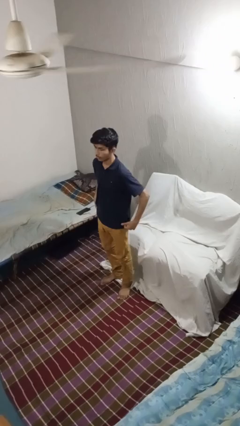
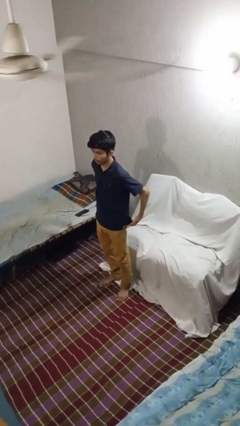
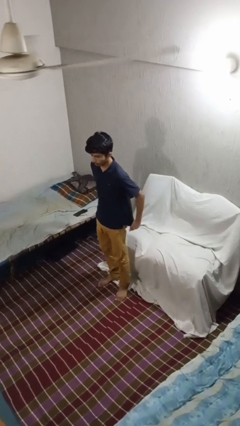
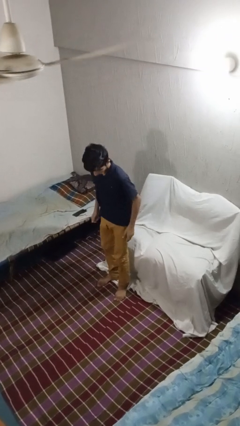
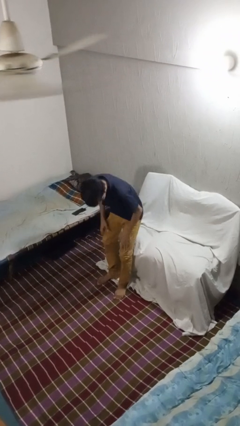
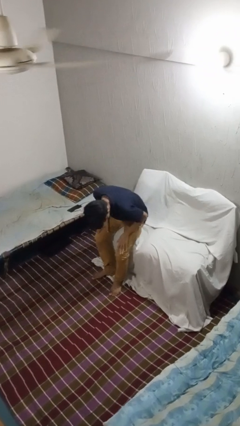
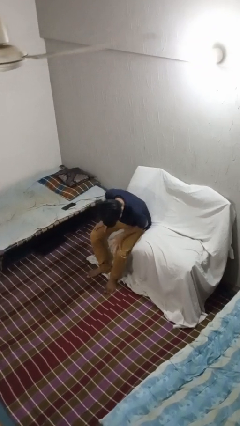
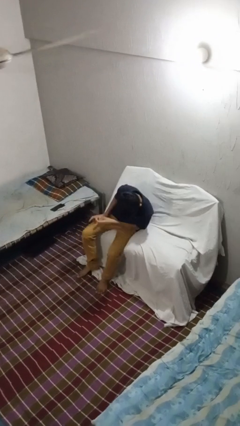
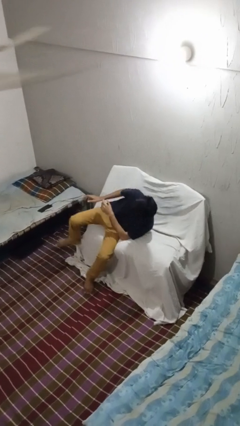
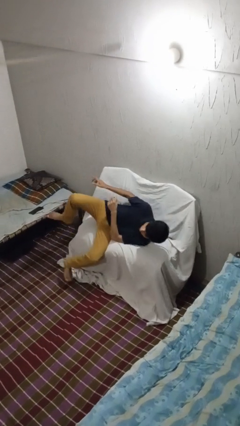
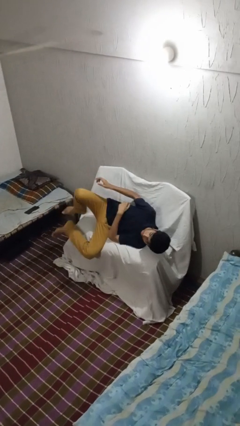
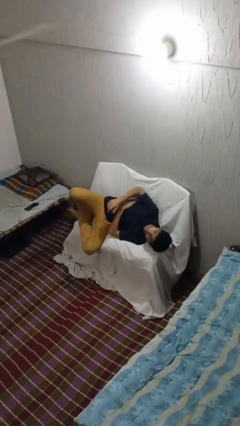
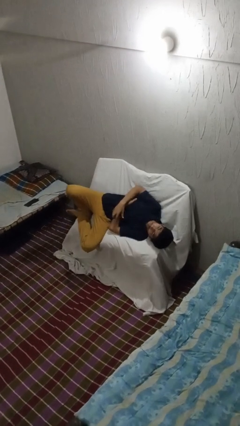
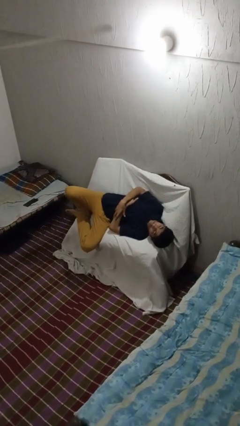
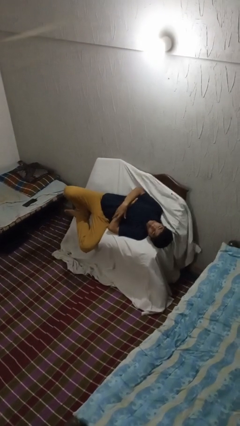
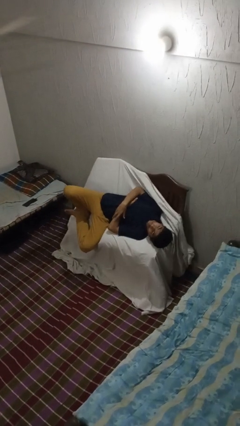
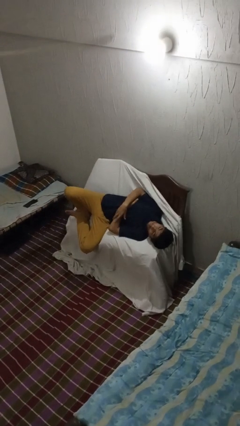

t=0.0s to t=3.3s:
person lies down on couch

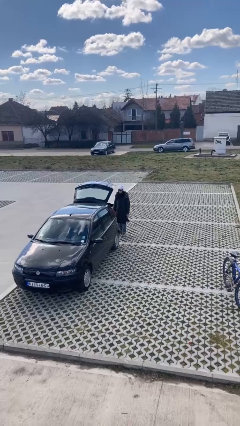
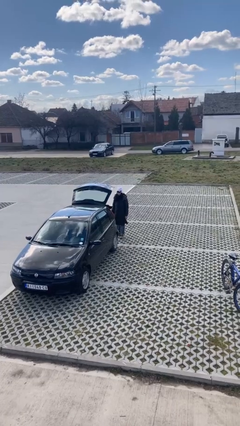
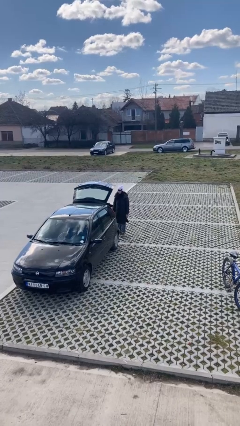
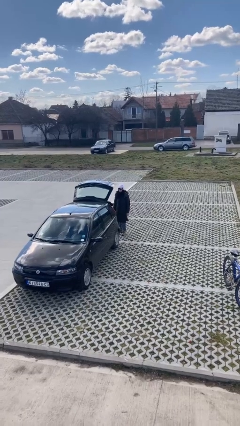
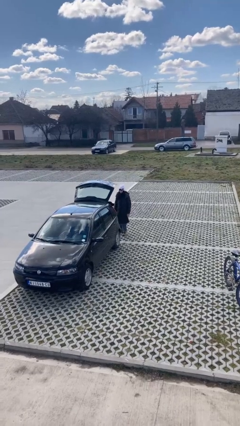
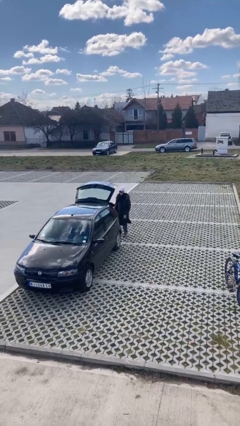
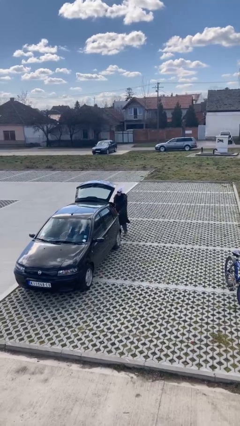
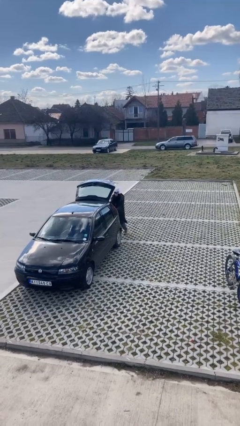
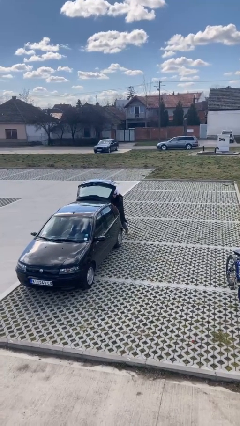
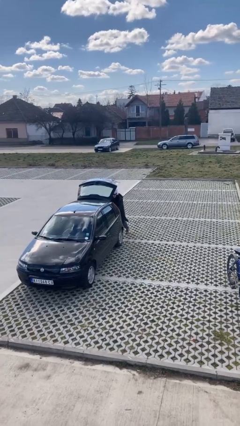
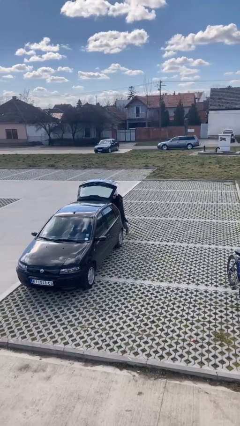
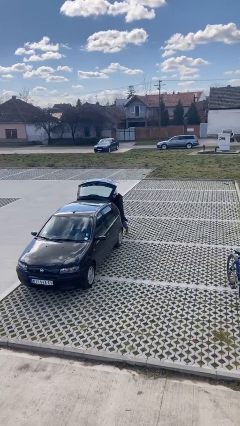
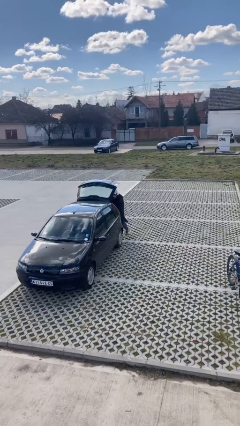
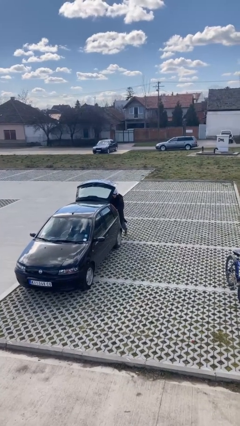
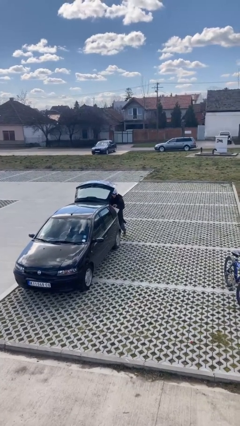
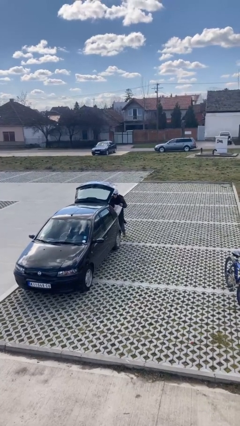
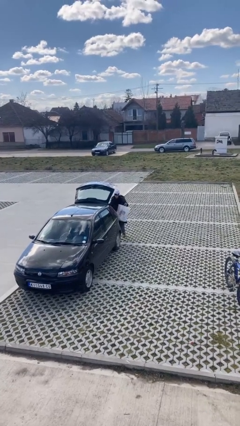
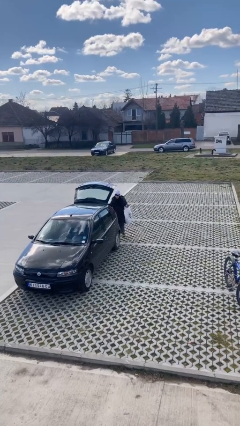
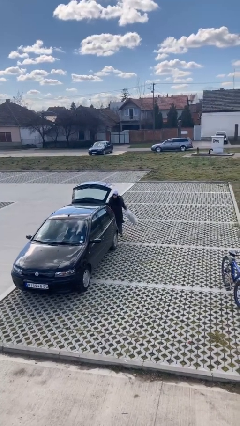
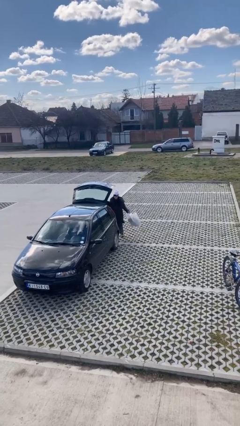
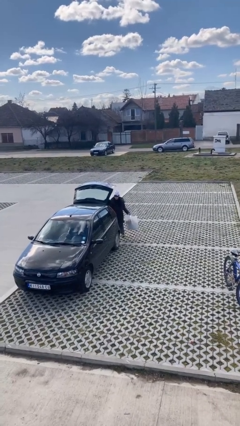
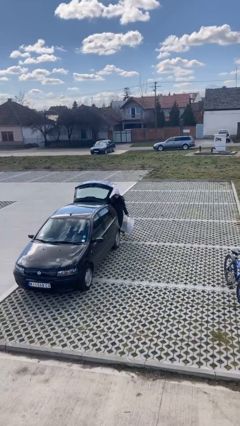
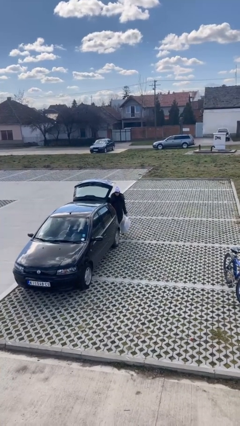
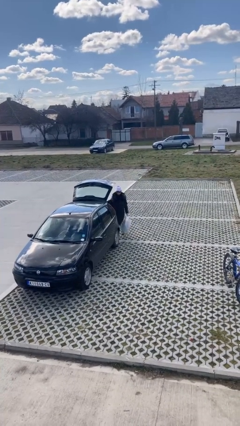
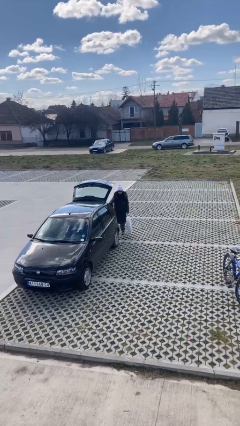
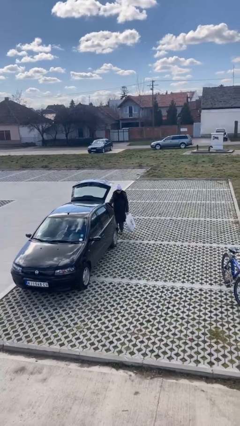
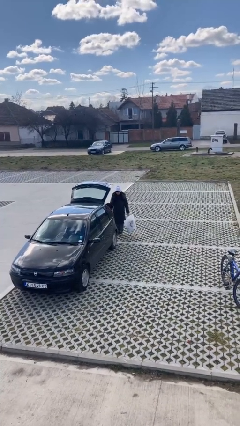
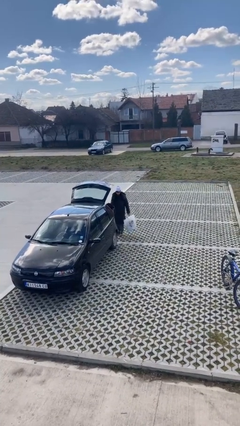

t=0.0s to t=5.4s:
person unloads car

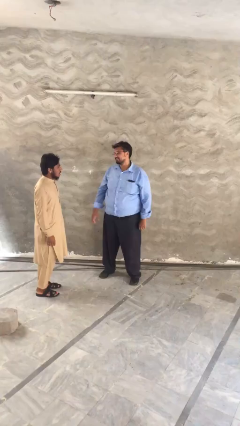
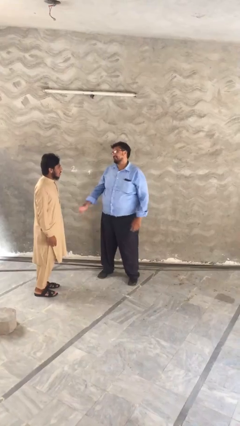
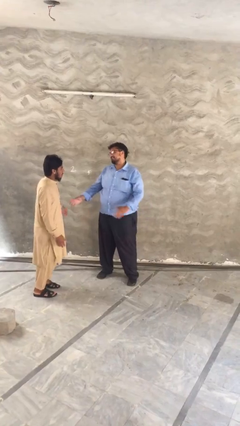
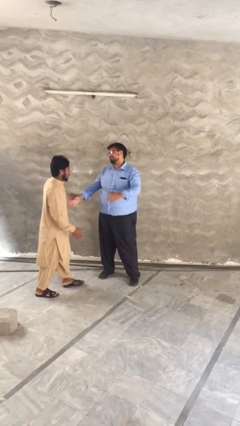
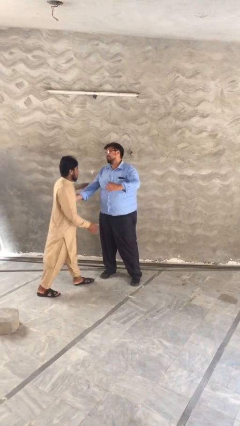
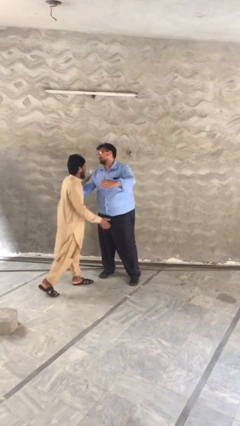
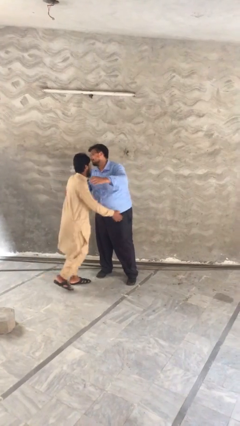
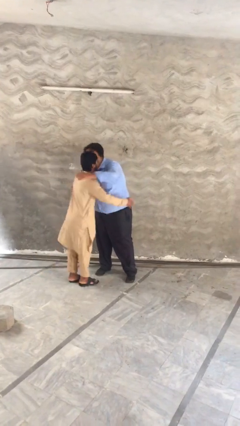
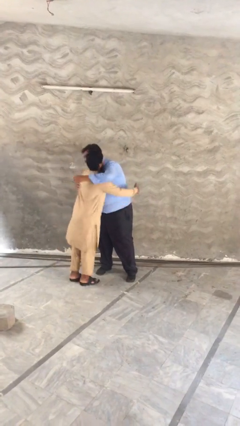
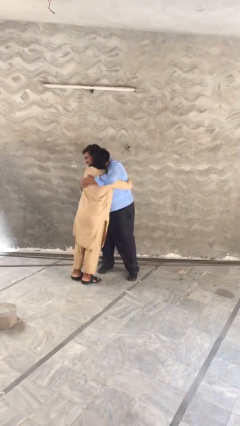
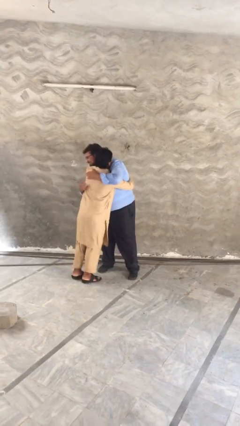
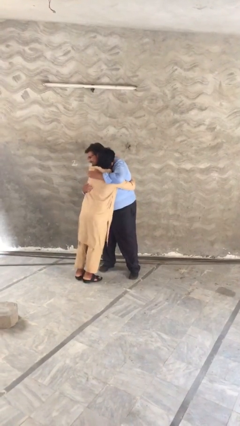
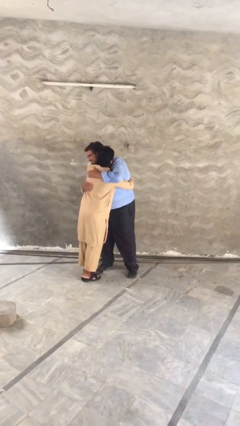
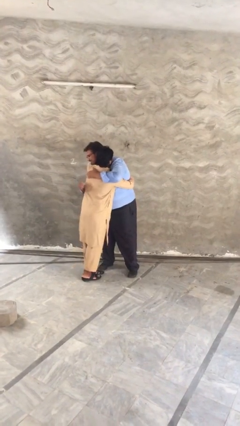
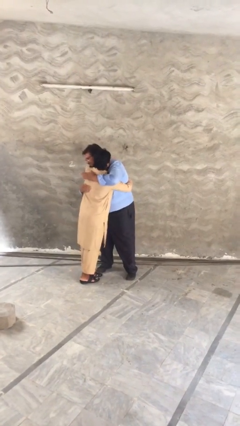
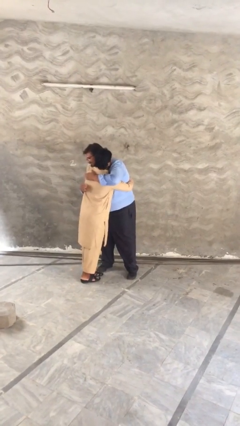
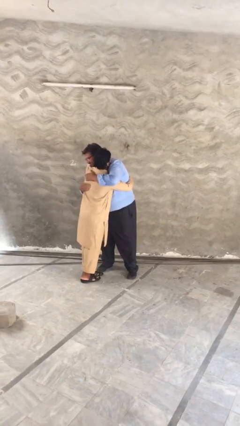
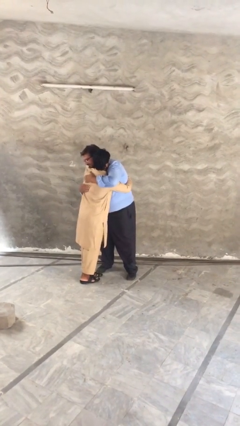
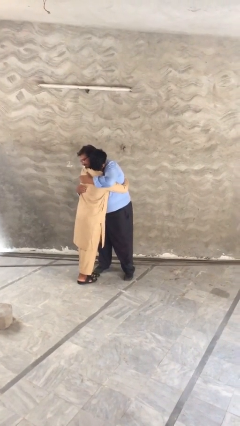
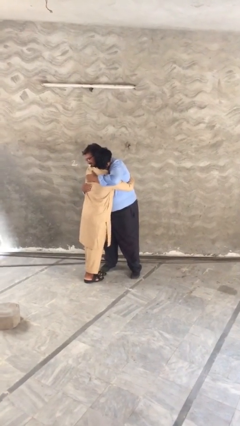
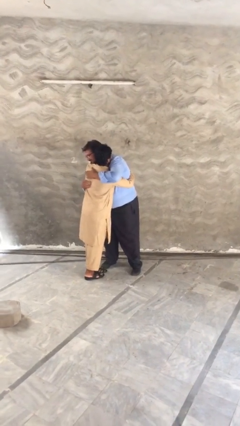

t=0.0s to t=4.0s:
person embraces person

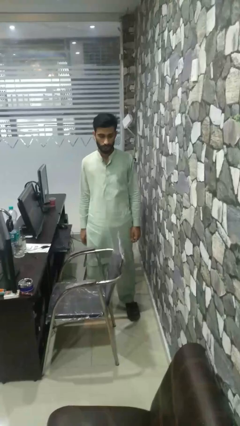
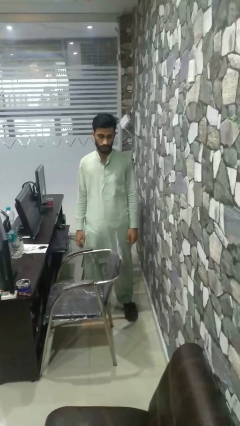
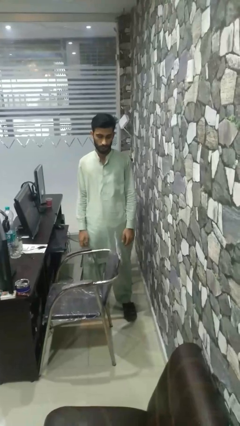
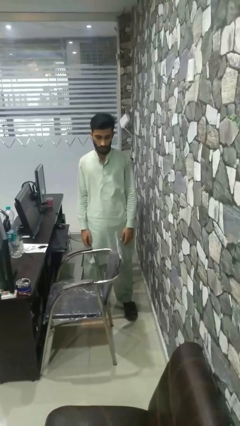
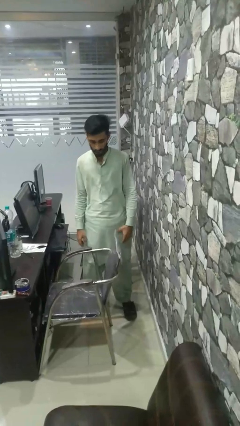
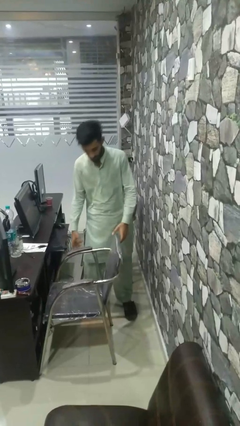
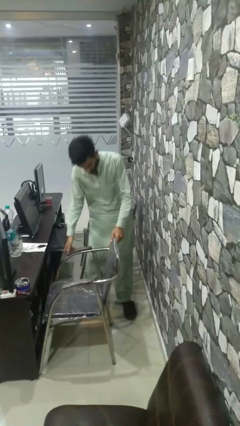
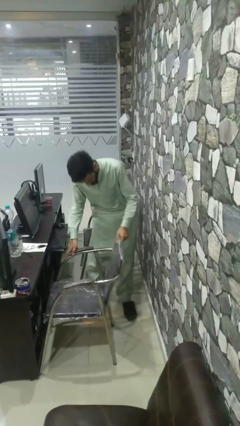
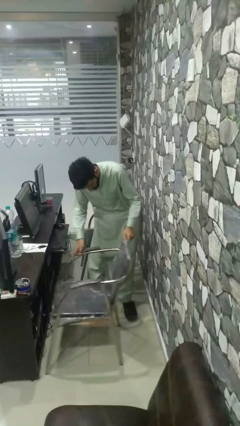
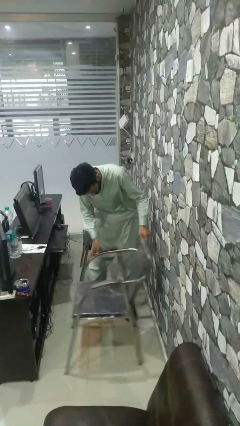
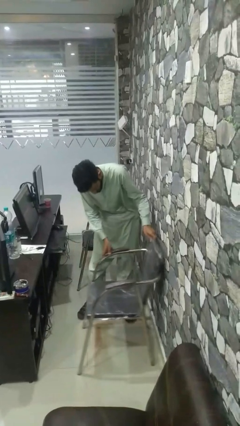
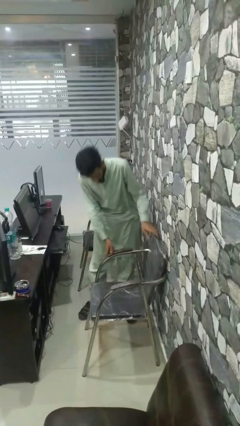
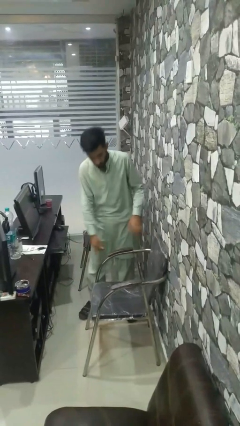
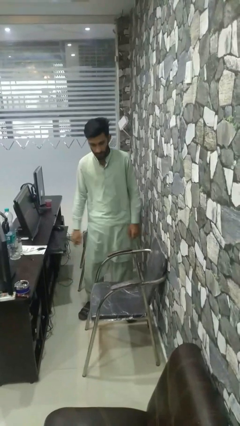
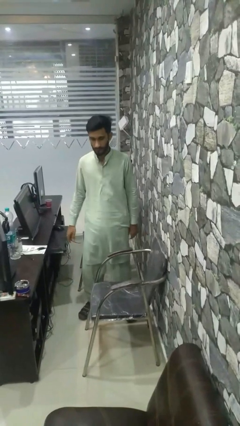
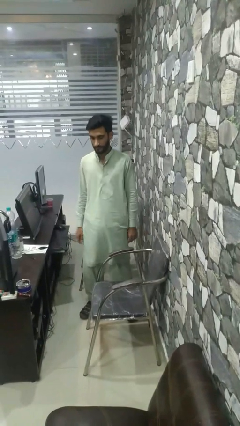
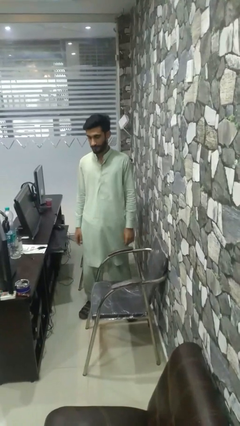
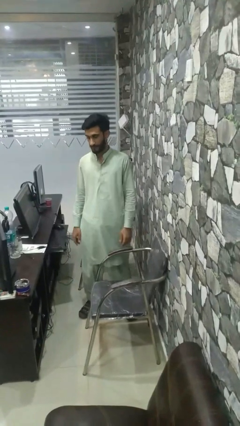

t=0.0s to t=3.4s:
person pulls out chair

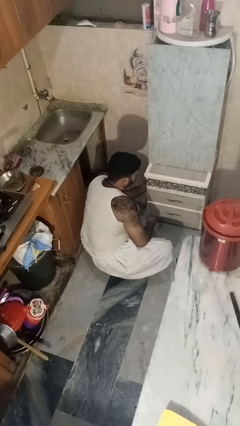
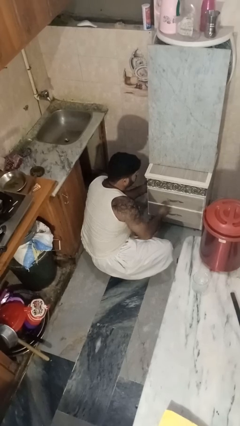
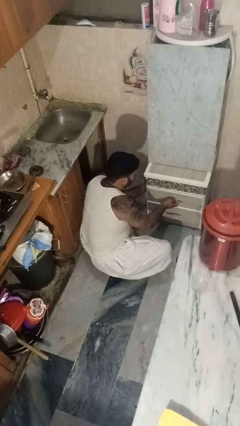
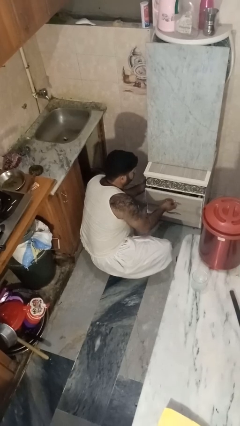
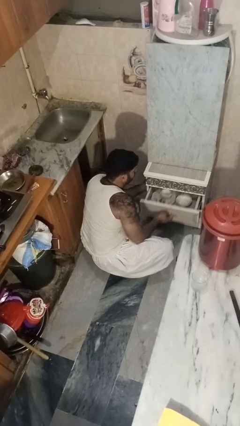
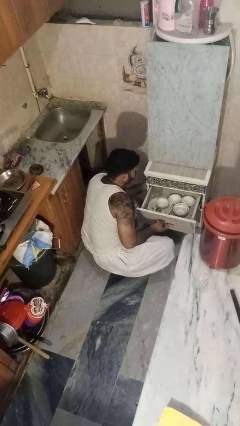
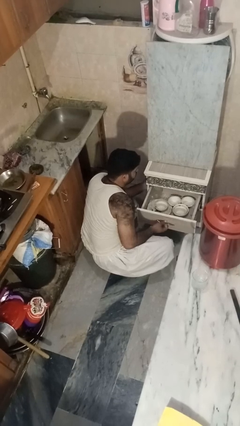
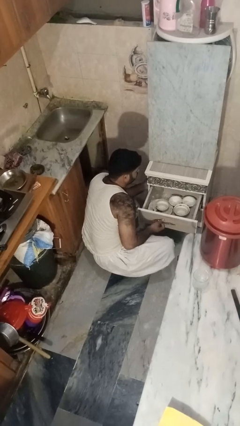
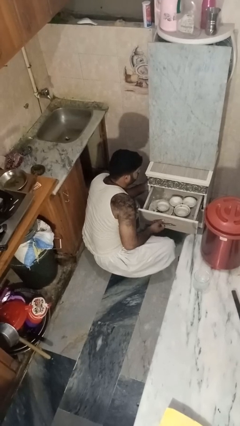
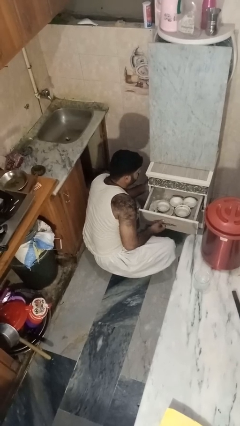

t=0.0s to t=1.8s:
person opens kitchen drawer
